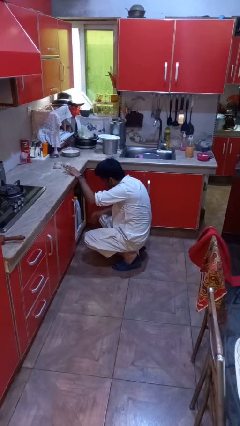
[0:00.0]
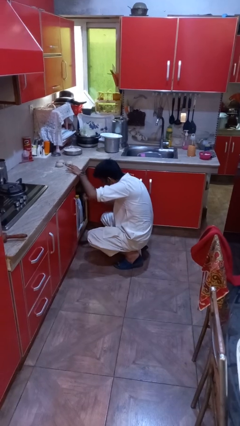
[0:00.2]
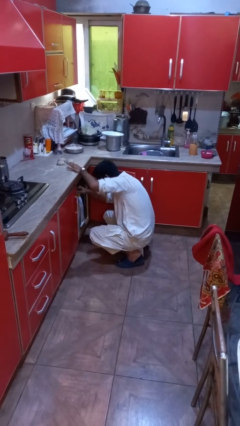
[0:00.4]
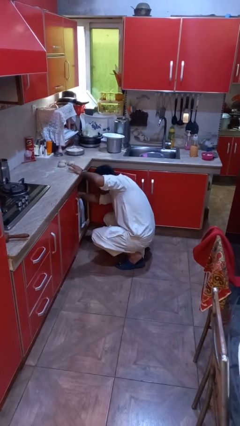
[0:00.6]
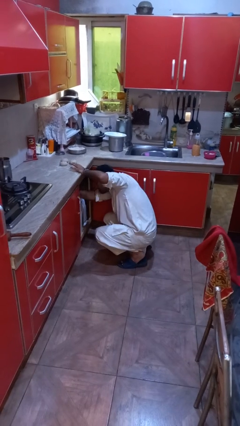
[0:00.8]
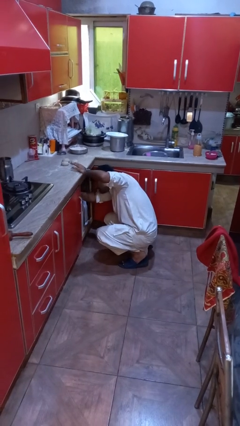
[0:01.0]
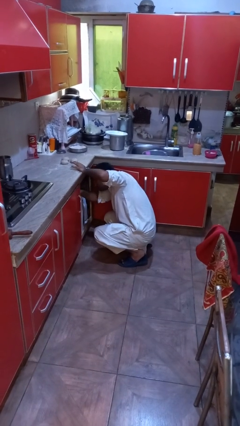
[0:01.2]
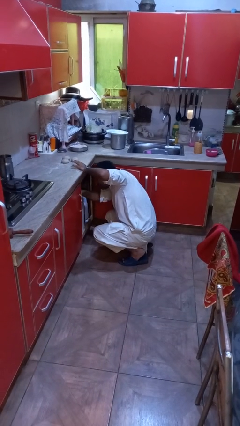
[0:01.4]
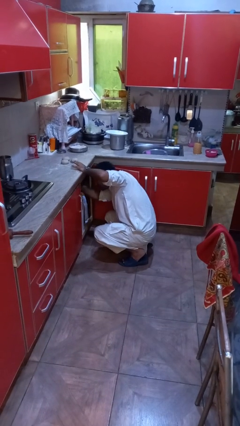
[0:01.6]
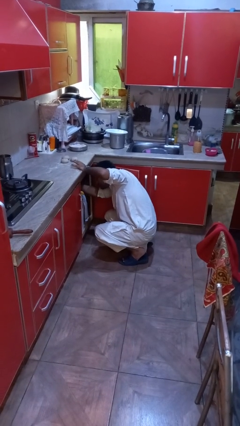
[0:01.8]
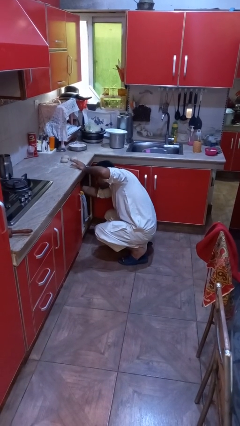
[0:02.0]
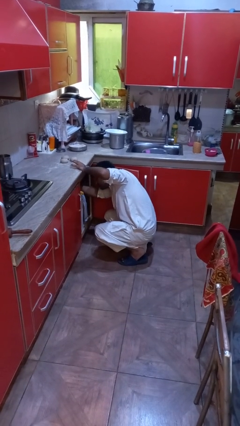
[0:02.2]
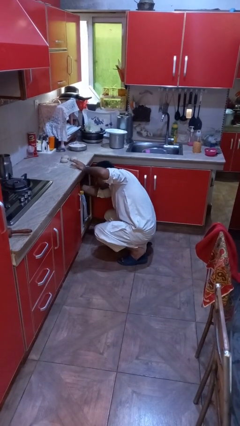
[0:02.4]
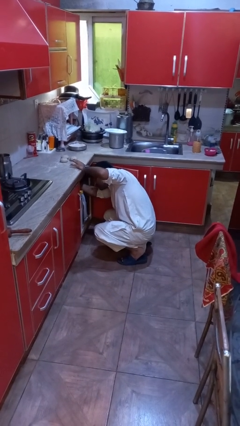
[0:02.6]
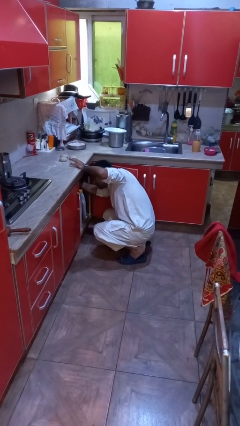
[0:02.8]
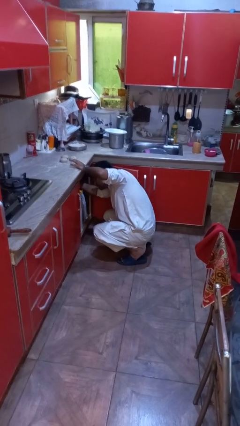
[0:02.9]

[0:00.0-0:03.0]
person searches in cabinet

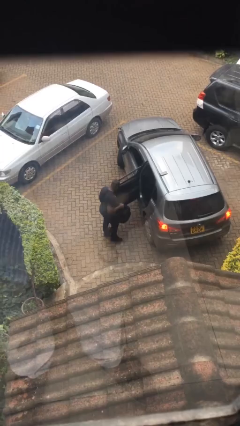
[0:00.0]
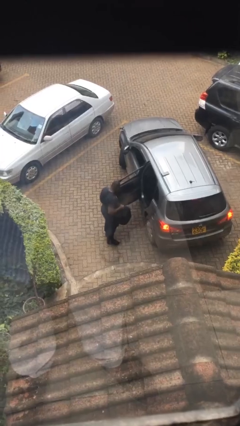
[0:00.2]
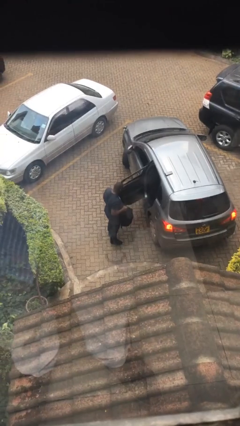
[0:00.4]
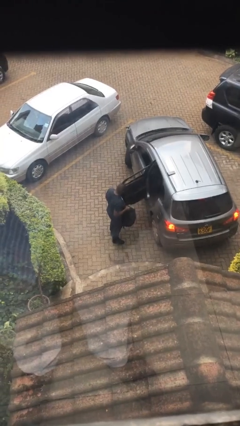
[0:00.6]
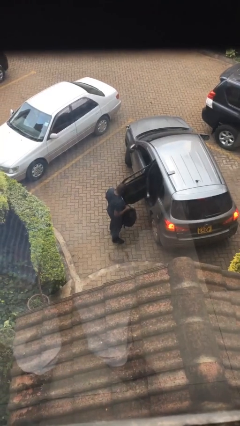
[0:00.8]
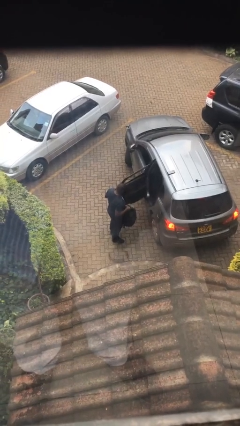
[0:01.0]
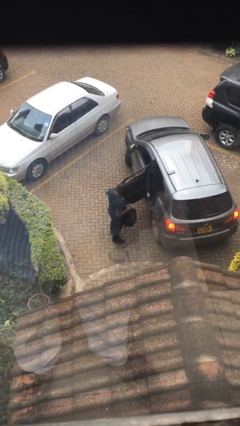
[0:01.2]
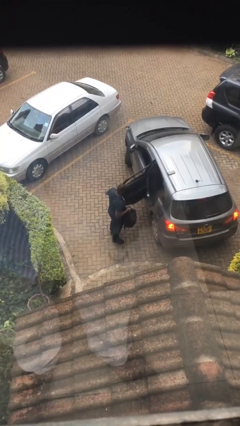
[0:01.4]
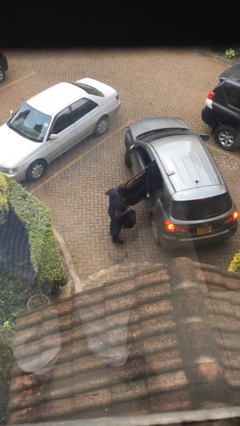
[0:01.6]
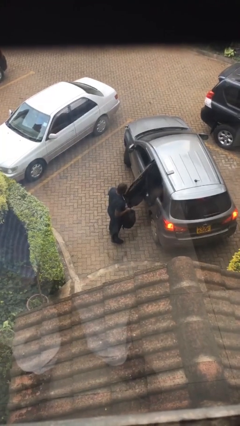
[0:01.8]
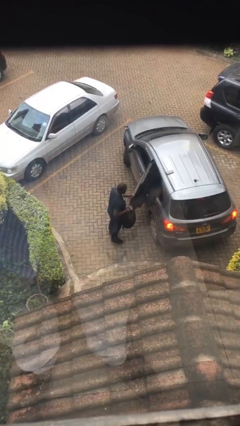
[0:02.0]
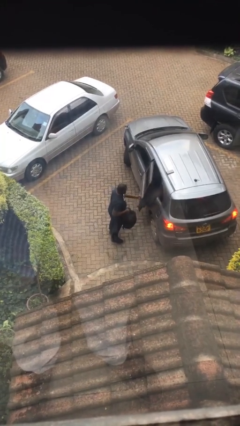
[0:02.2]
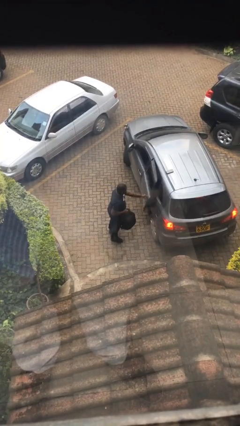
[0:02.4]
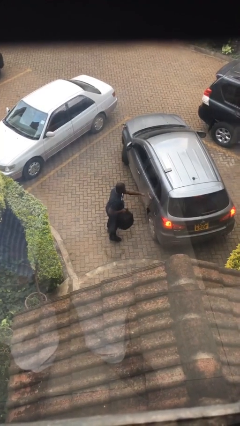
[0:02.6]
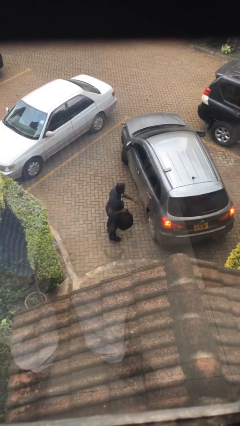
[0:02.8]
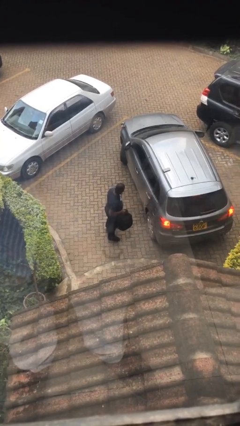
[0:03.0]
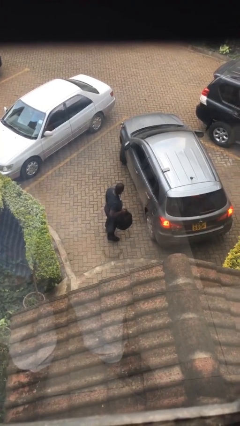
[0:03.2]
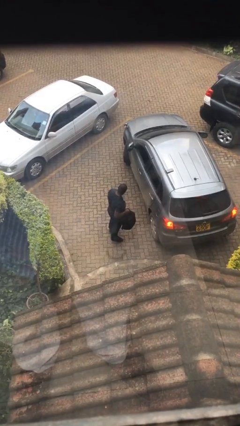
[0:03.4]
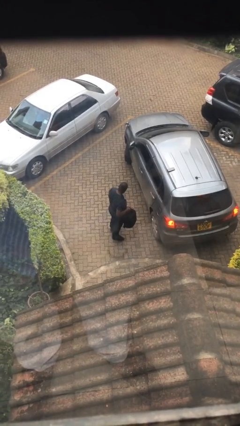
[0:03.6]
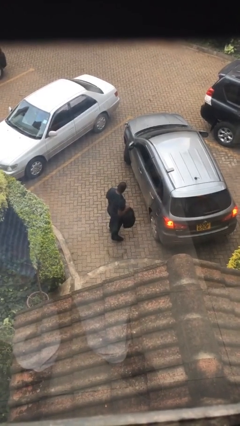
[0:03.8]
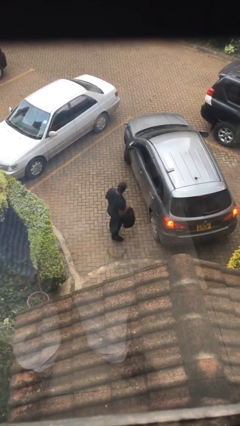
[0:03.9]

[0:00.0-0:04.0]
person closes car door

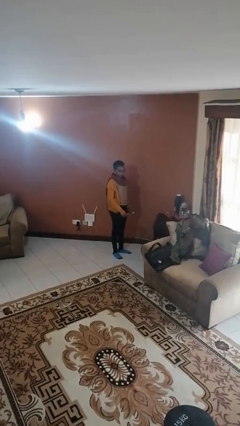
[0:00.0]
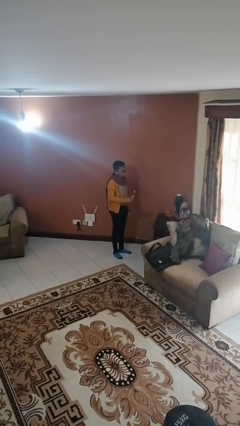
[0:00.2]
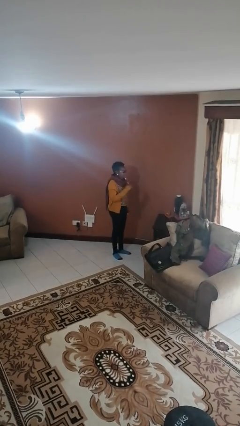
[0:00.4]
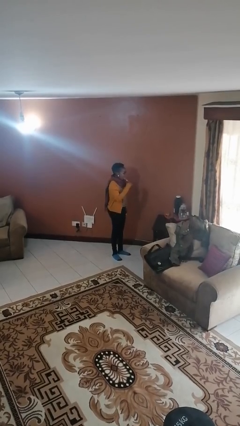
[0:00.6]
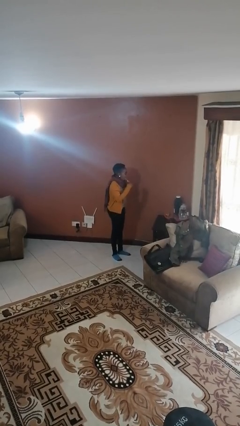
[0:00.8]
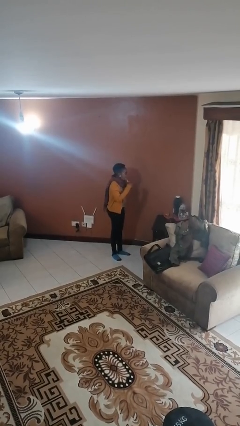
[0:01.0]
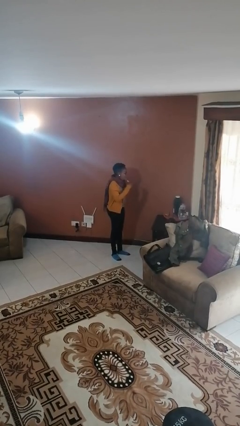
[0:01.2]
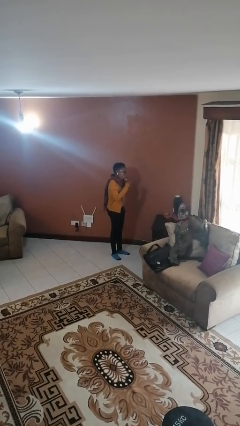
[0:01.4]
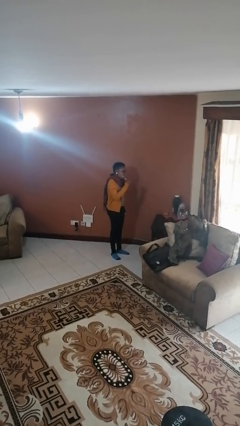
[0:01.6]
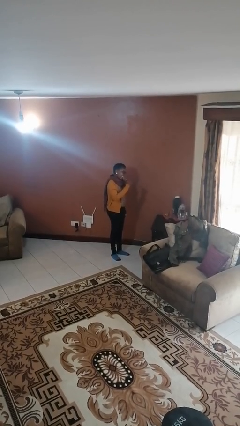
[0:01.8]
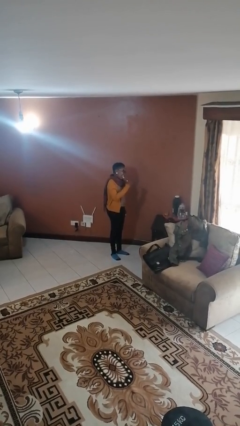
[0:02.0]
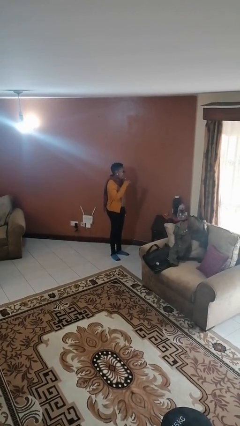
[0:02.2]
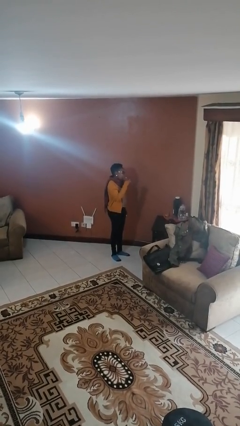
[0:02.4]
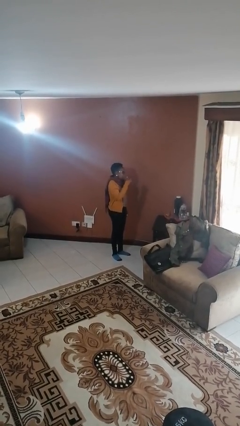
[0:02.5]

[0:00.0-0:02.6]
person brushes teeth

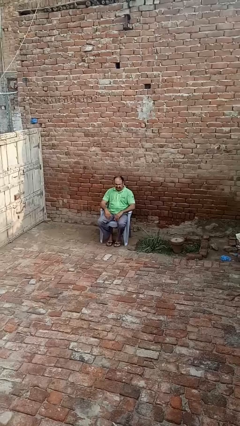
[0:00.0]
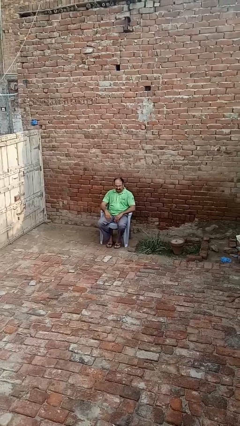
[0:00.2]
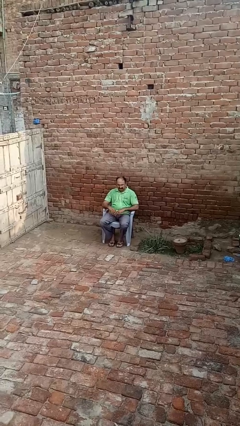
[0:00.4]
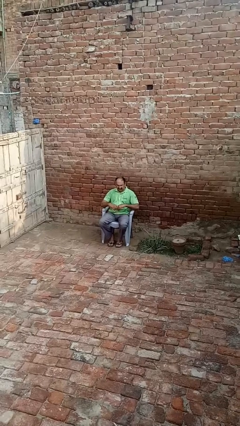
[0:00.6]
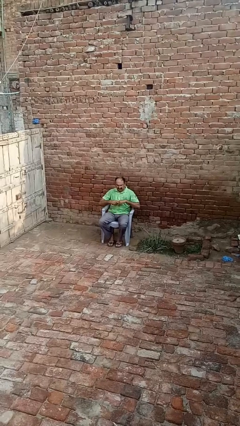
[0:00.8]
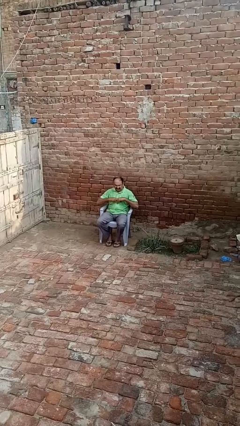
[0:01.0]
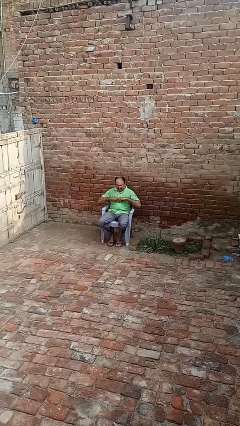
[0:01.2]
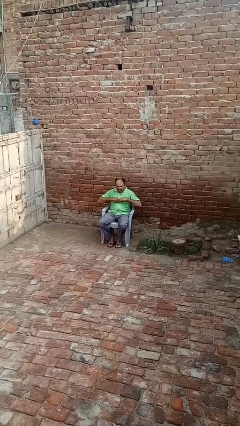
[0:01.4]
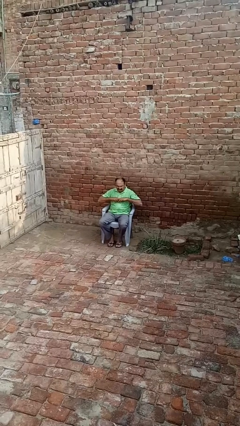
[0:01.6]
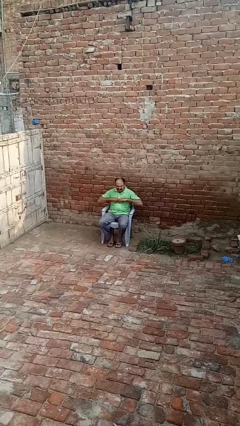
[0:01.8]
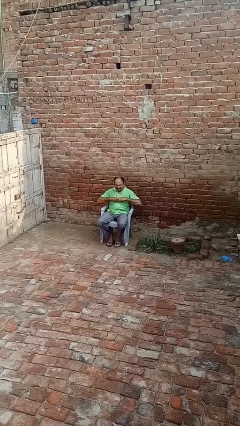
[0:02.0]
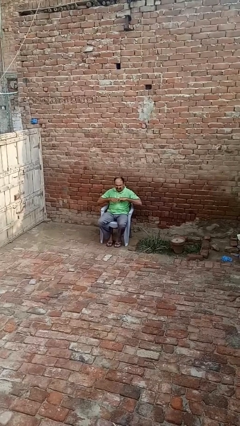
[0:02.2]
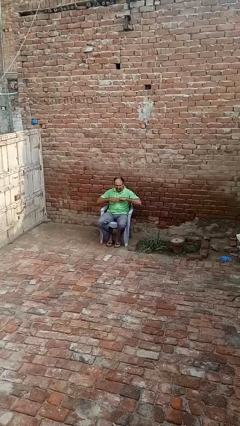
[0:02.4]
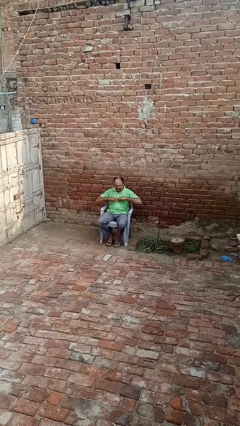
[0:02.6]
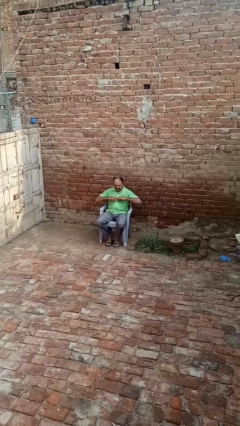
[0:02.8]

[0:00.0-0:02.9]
person cracks knuckles

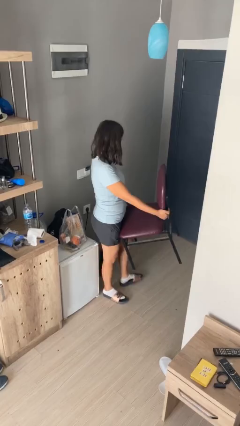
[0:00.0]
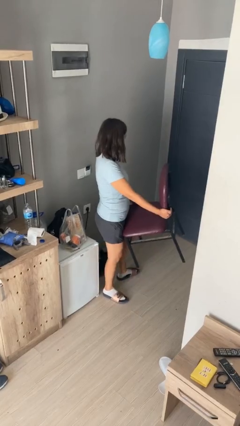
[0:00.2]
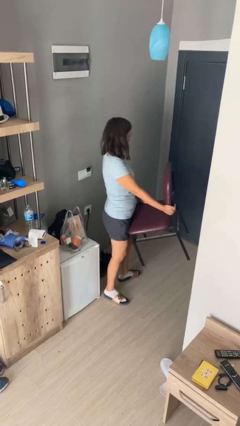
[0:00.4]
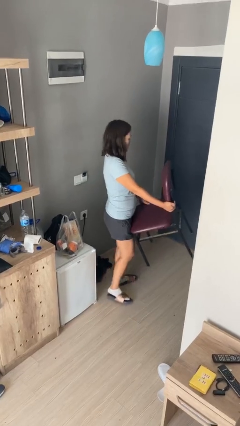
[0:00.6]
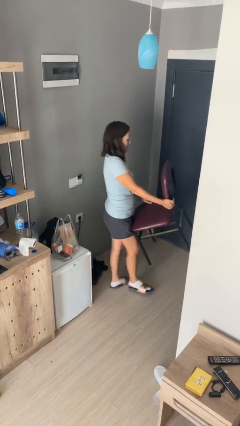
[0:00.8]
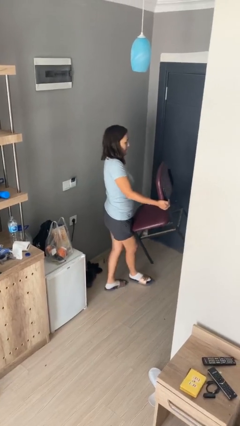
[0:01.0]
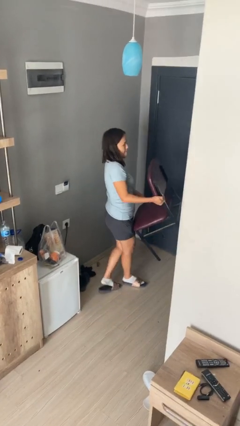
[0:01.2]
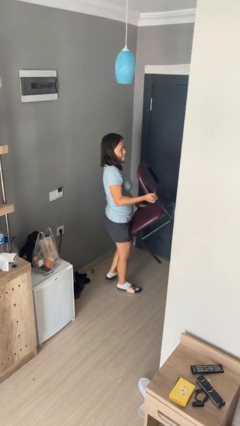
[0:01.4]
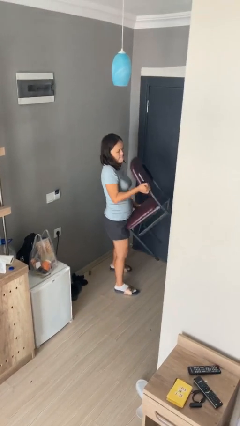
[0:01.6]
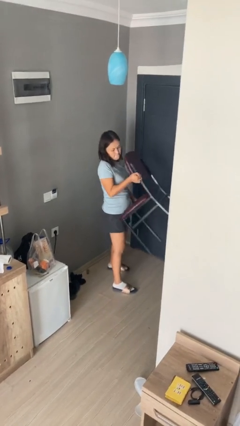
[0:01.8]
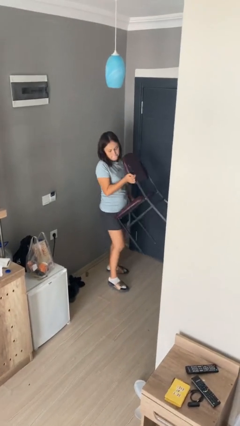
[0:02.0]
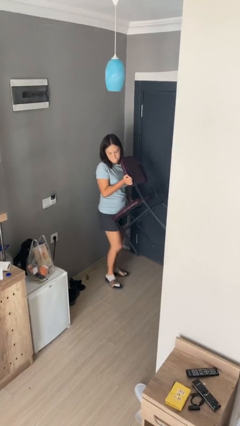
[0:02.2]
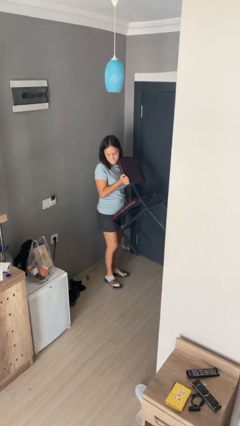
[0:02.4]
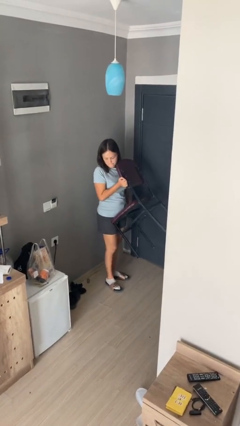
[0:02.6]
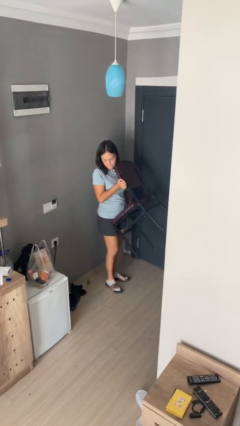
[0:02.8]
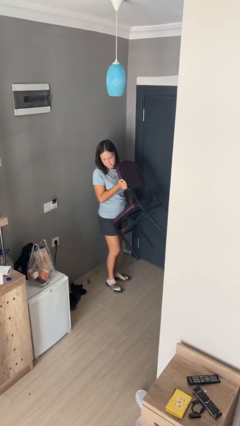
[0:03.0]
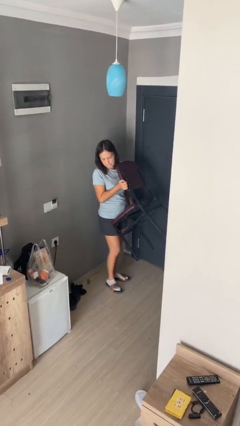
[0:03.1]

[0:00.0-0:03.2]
person carries furniture

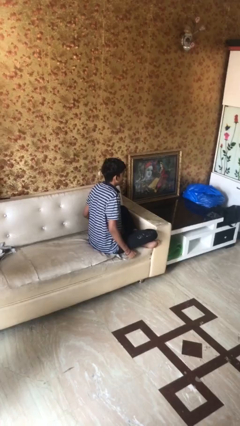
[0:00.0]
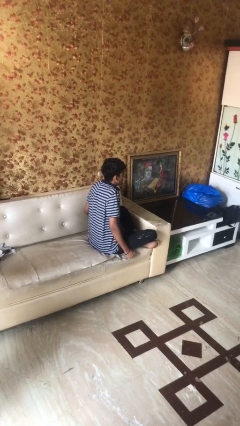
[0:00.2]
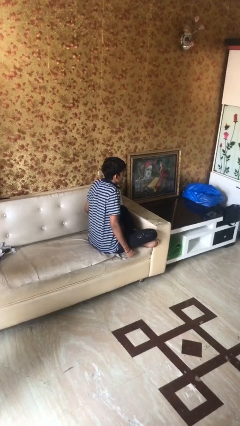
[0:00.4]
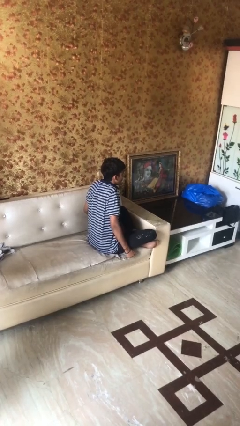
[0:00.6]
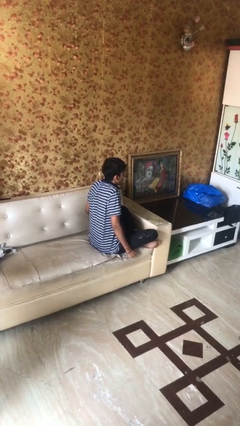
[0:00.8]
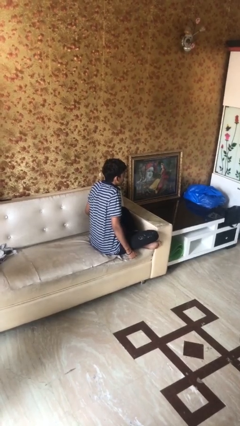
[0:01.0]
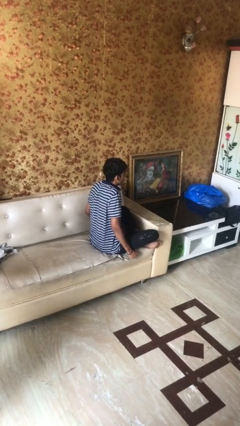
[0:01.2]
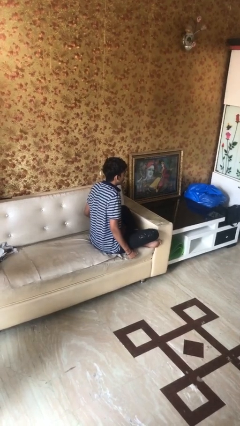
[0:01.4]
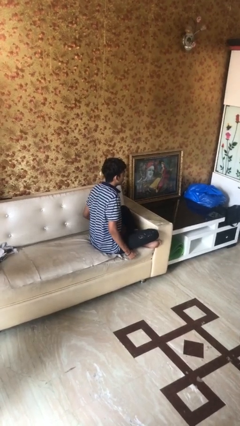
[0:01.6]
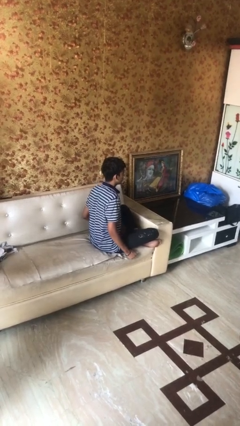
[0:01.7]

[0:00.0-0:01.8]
person shrugs
